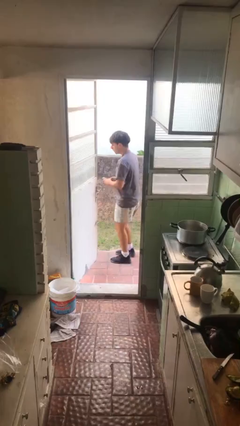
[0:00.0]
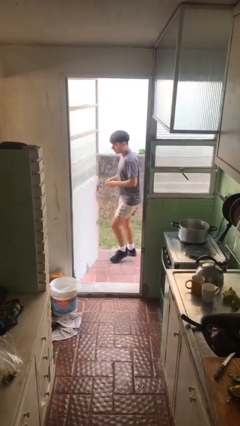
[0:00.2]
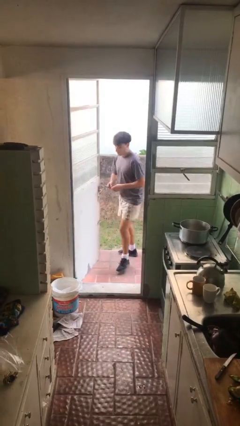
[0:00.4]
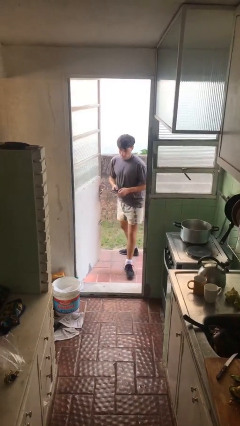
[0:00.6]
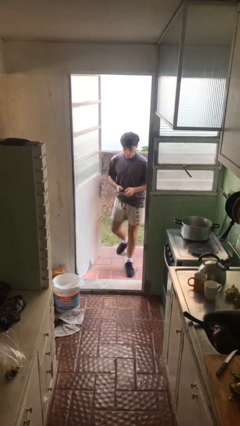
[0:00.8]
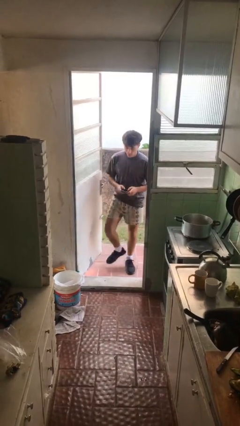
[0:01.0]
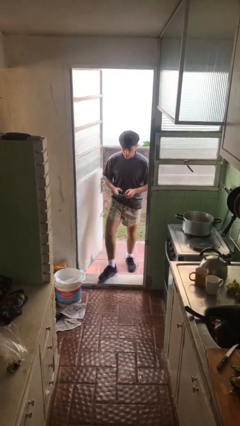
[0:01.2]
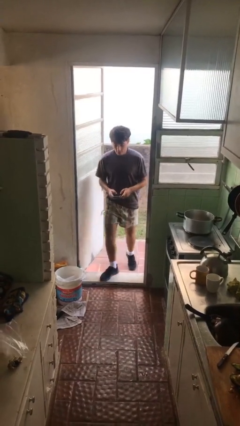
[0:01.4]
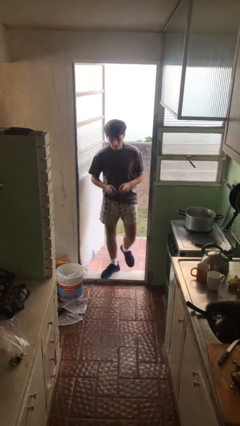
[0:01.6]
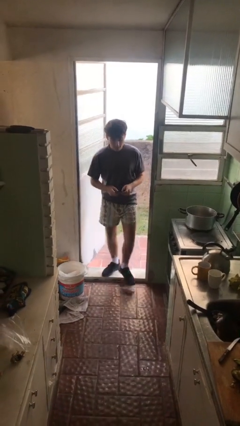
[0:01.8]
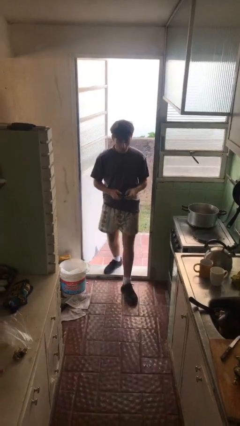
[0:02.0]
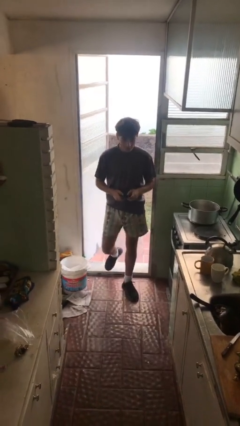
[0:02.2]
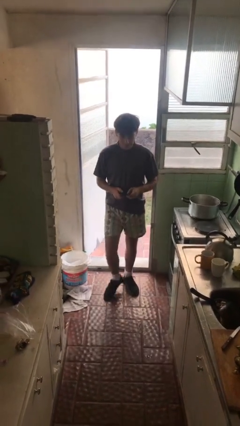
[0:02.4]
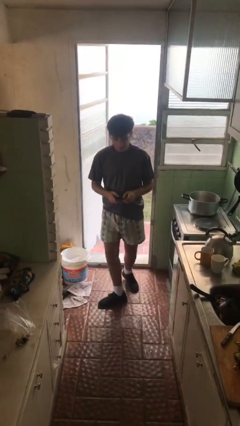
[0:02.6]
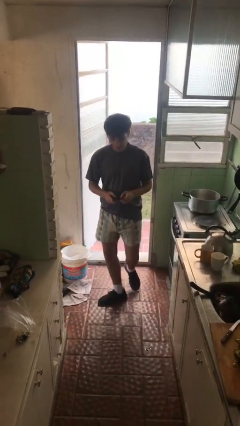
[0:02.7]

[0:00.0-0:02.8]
person enters scene through structure

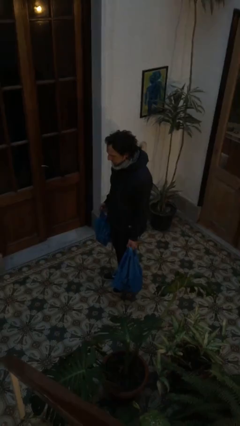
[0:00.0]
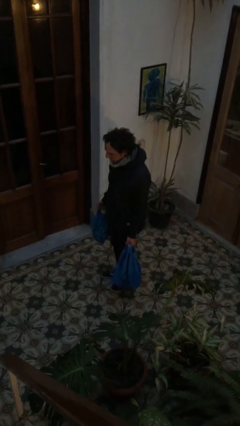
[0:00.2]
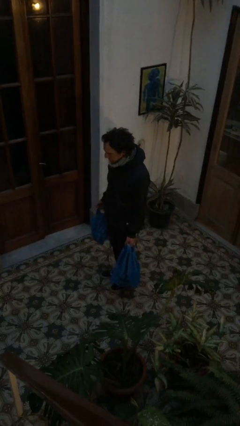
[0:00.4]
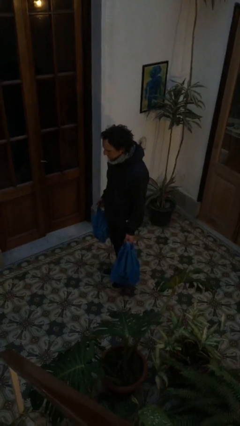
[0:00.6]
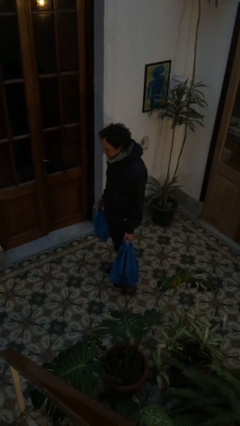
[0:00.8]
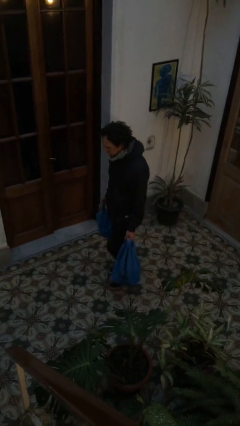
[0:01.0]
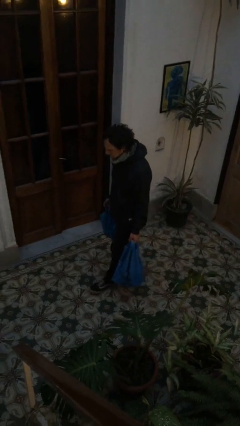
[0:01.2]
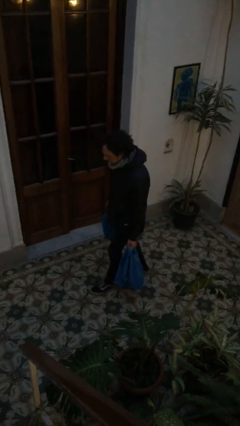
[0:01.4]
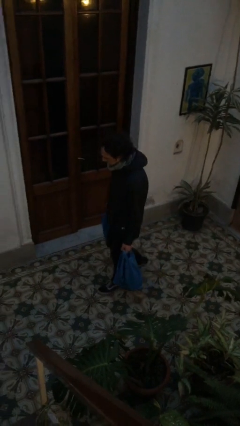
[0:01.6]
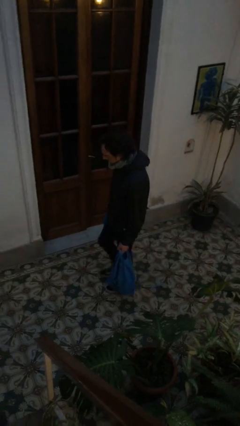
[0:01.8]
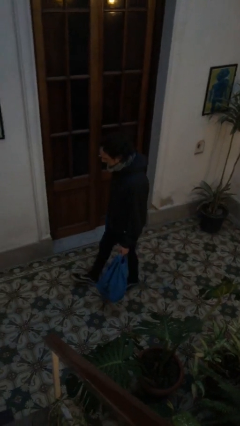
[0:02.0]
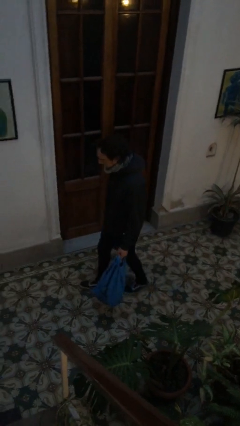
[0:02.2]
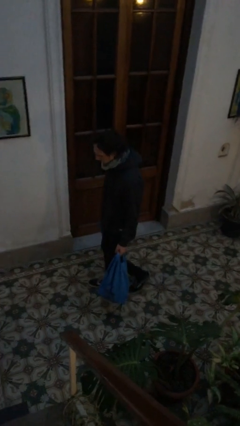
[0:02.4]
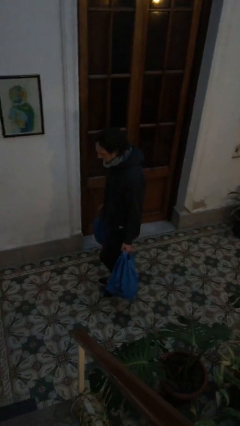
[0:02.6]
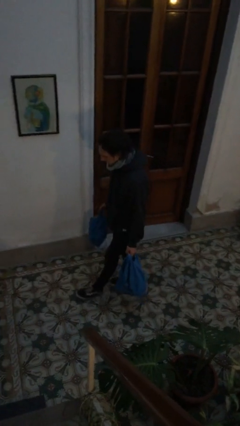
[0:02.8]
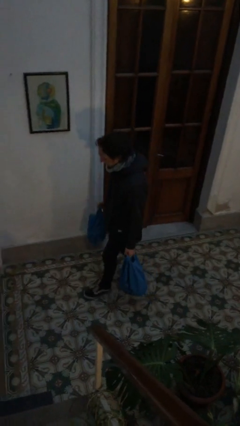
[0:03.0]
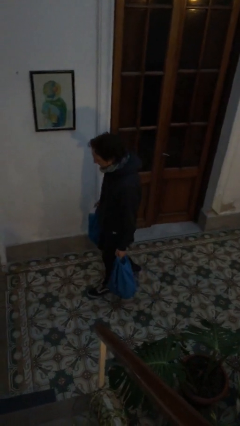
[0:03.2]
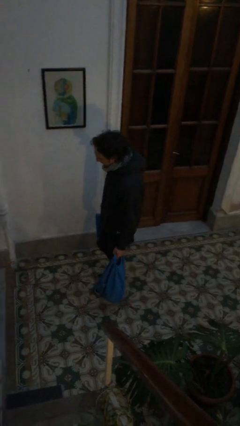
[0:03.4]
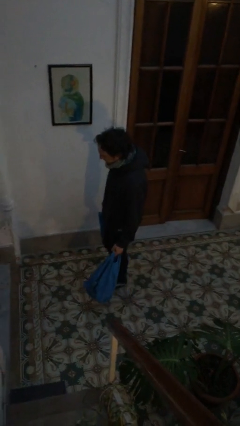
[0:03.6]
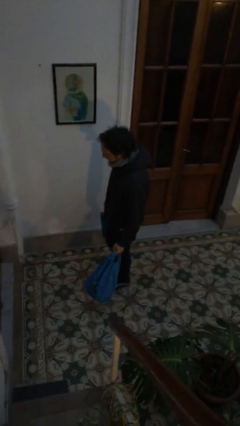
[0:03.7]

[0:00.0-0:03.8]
person carries groceries

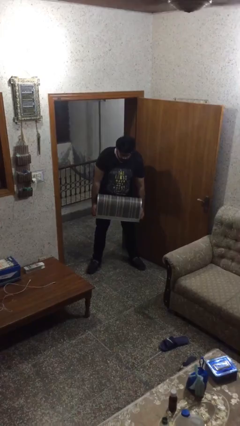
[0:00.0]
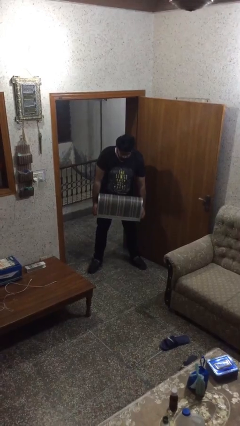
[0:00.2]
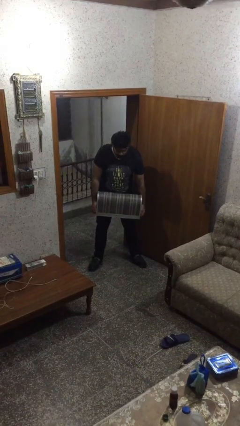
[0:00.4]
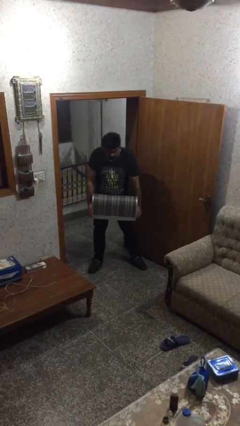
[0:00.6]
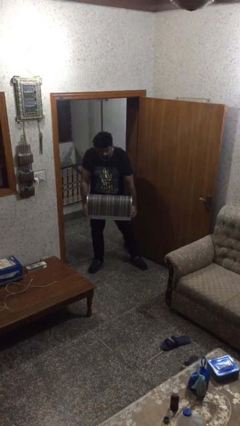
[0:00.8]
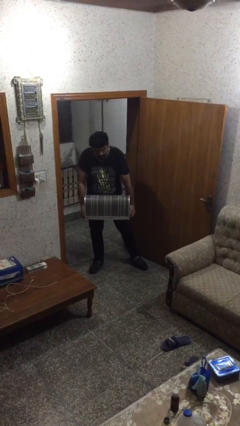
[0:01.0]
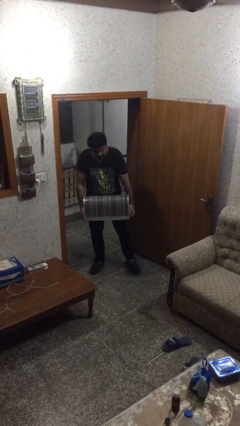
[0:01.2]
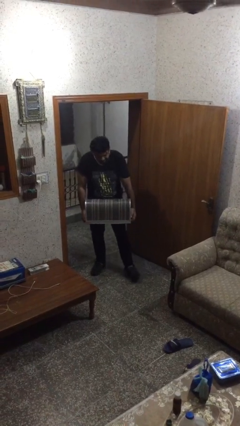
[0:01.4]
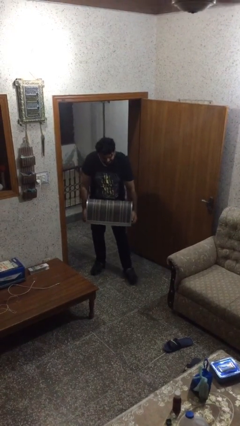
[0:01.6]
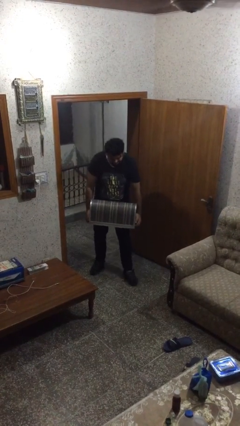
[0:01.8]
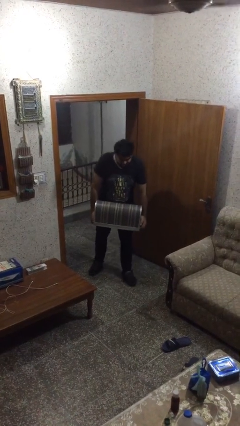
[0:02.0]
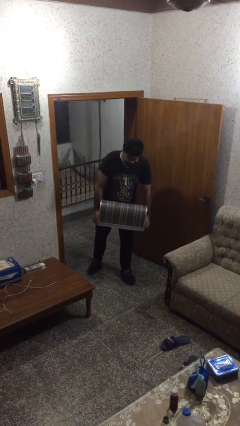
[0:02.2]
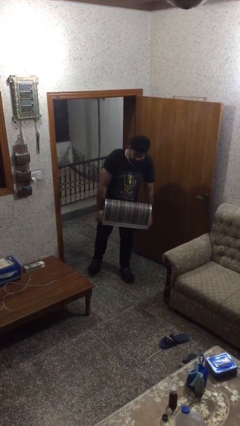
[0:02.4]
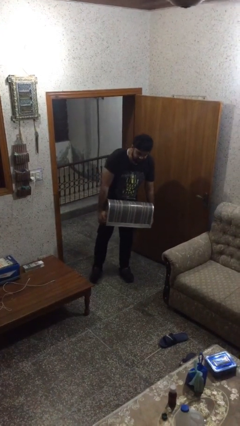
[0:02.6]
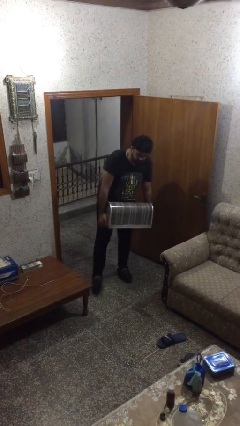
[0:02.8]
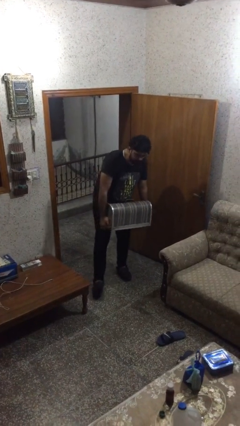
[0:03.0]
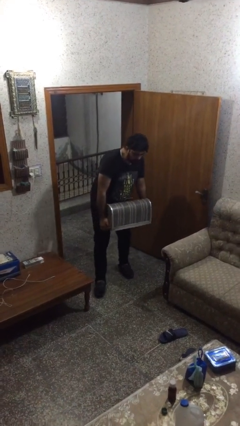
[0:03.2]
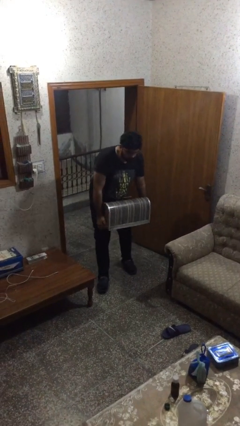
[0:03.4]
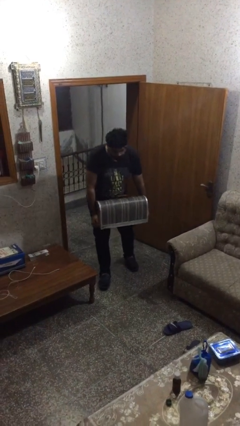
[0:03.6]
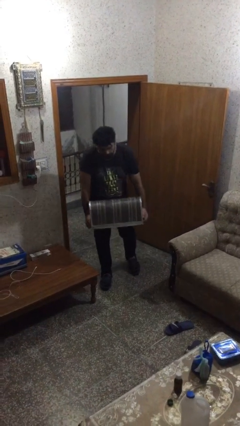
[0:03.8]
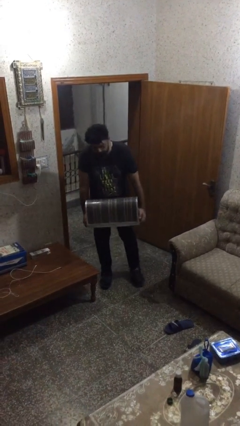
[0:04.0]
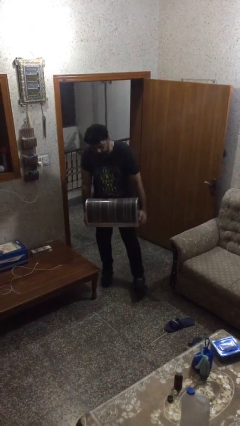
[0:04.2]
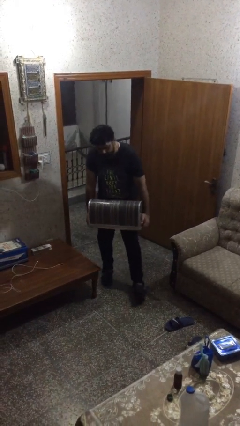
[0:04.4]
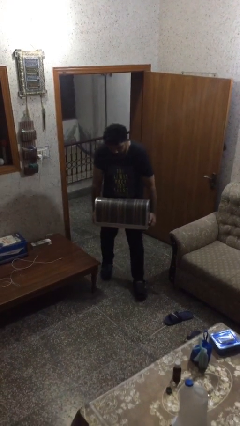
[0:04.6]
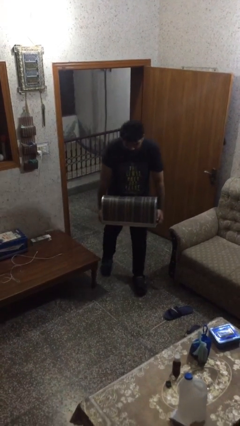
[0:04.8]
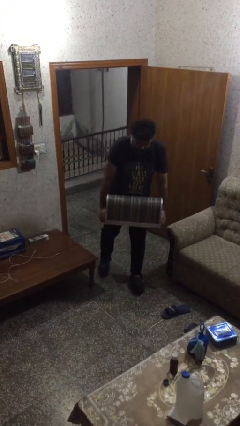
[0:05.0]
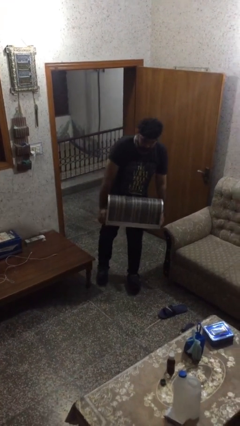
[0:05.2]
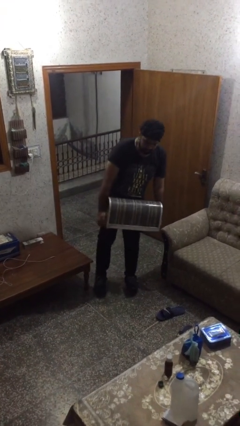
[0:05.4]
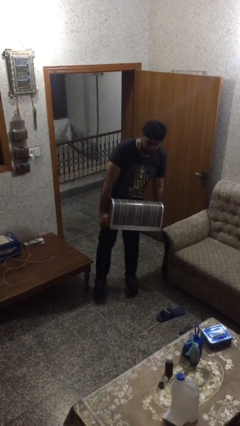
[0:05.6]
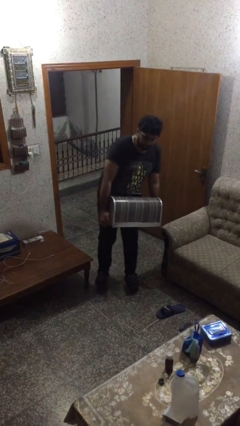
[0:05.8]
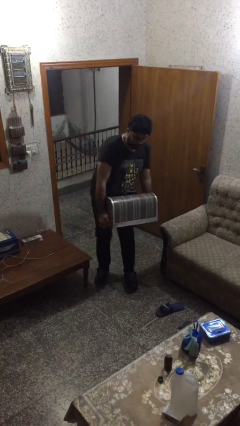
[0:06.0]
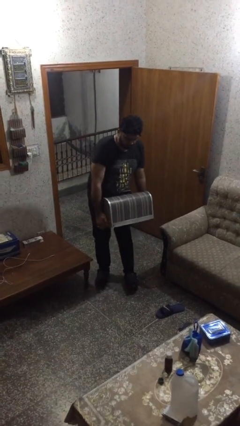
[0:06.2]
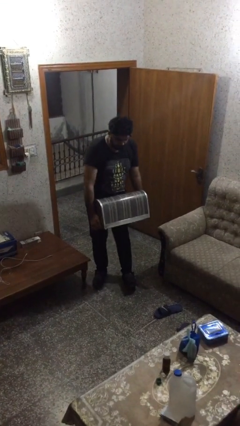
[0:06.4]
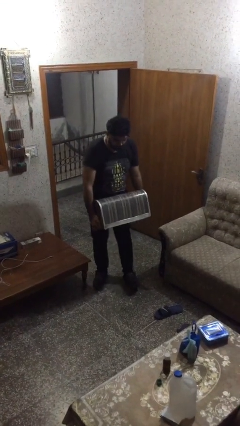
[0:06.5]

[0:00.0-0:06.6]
person carries heavy object

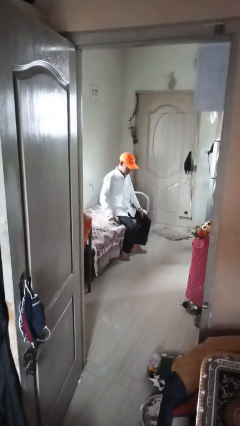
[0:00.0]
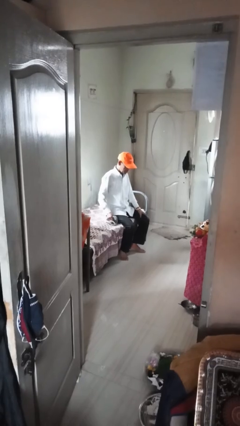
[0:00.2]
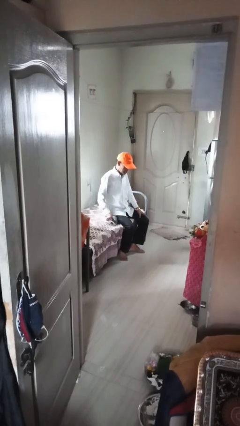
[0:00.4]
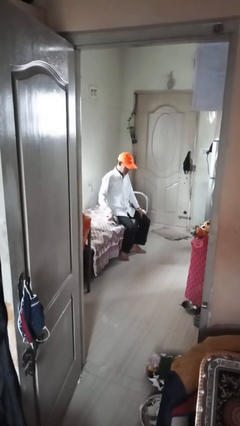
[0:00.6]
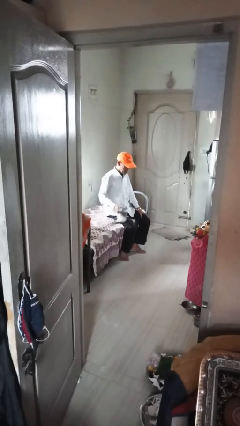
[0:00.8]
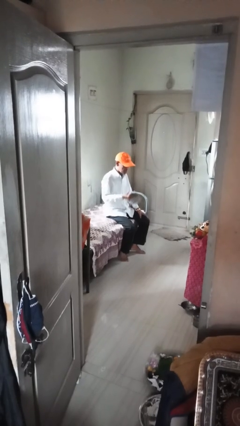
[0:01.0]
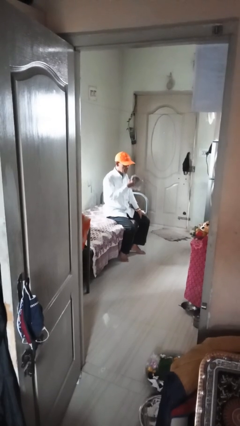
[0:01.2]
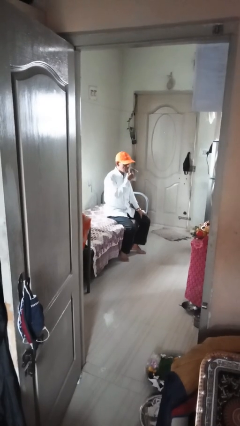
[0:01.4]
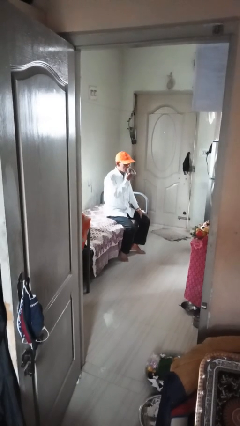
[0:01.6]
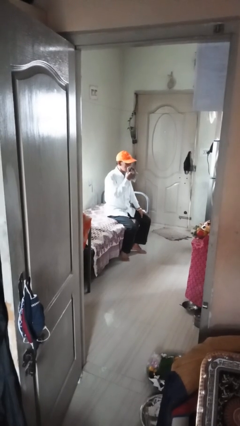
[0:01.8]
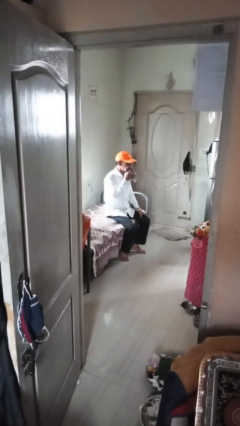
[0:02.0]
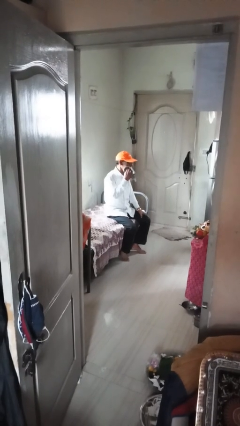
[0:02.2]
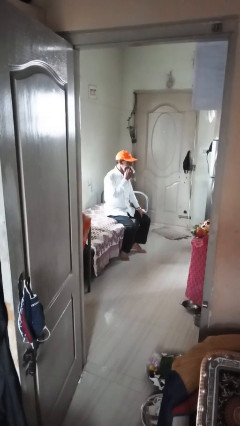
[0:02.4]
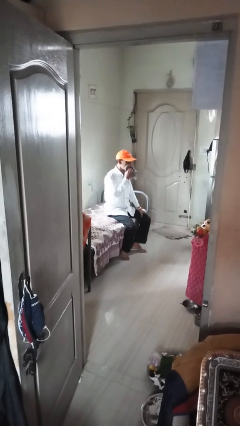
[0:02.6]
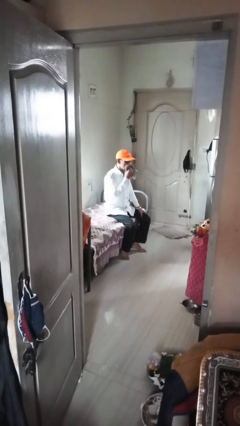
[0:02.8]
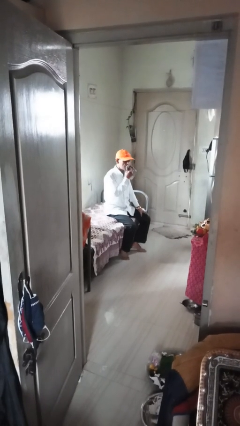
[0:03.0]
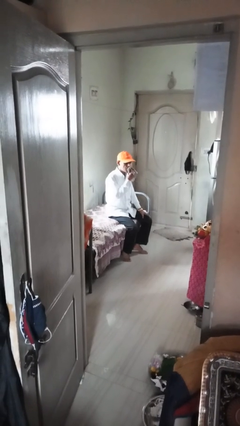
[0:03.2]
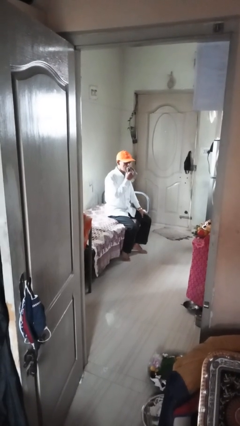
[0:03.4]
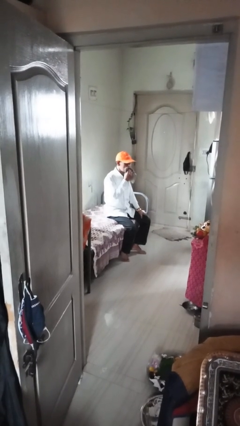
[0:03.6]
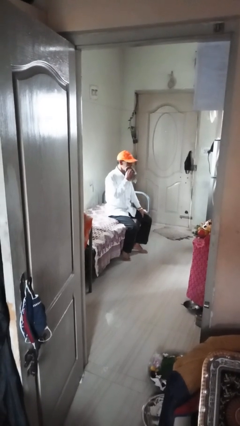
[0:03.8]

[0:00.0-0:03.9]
person wipes mouth with napkin

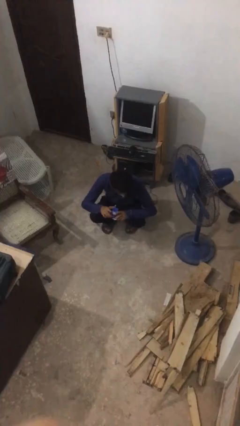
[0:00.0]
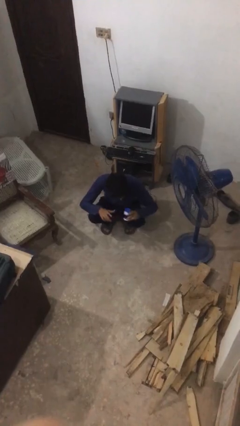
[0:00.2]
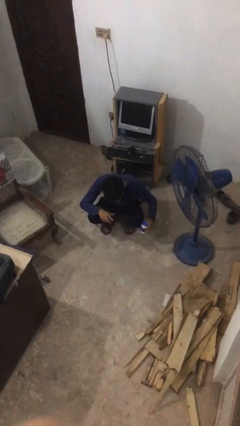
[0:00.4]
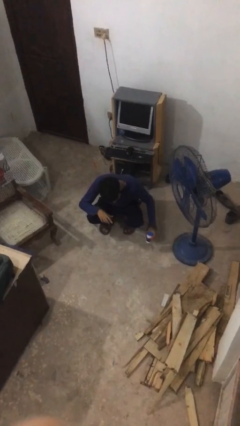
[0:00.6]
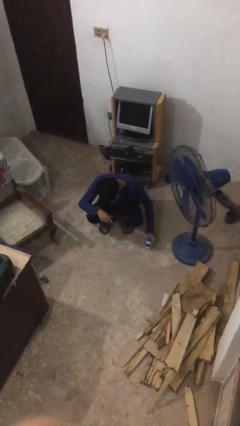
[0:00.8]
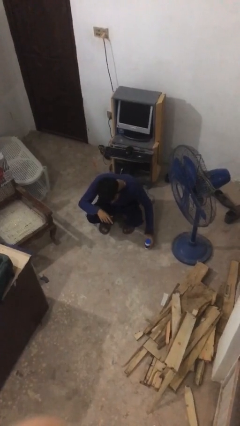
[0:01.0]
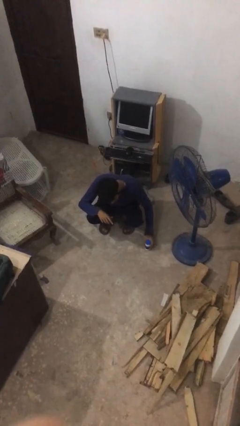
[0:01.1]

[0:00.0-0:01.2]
person puts down object on floor
